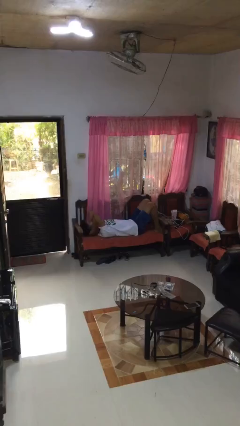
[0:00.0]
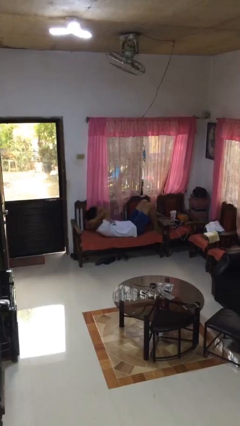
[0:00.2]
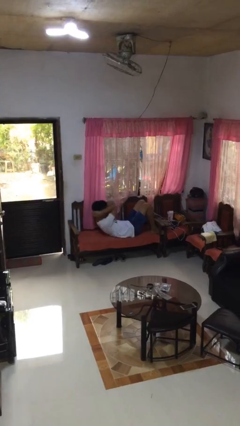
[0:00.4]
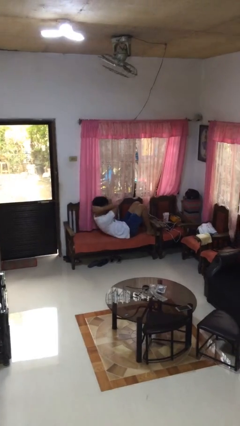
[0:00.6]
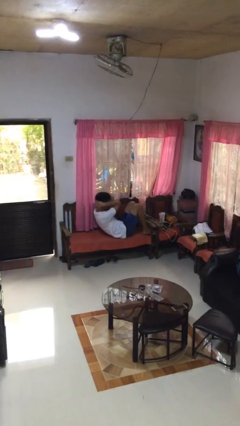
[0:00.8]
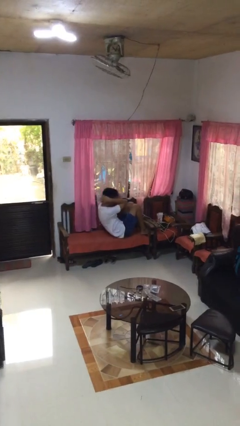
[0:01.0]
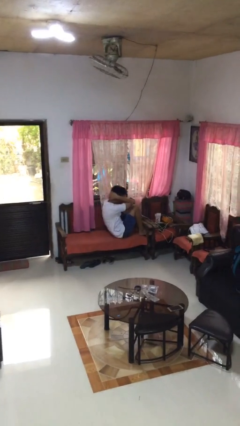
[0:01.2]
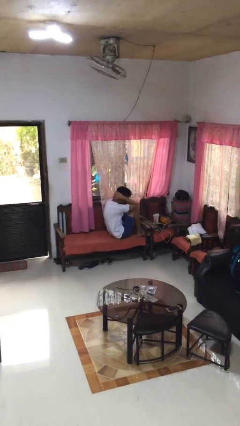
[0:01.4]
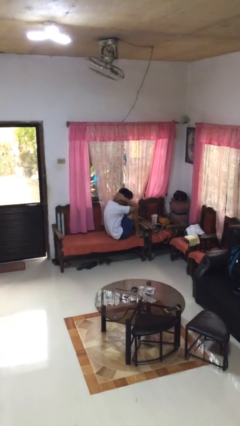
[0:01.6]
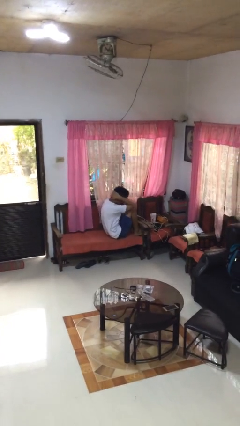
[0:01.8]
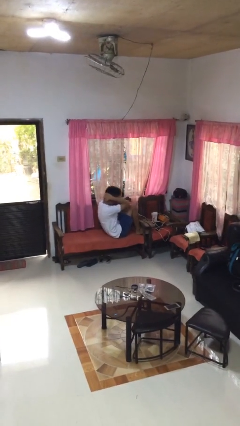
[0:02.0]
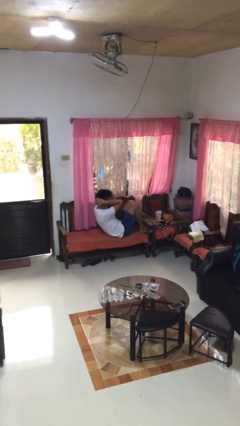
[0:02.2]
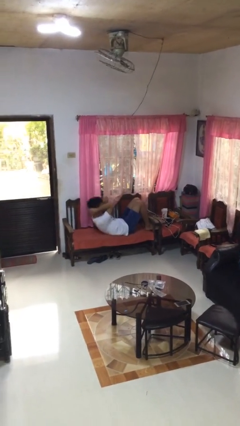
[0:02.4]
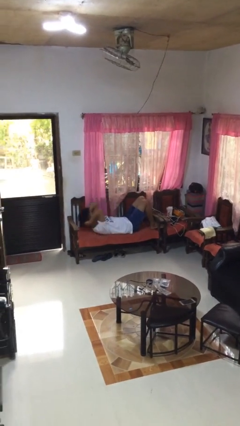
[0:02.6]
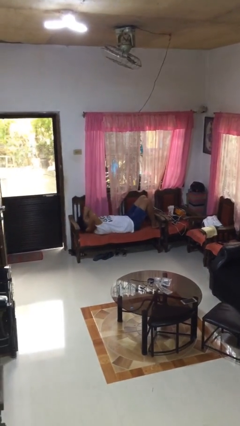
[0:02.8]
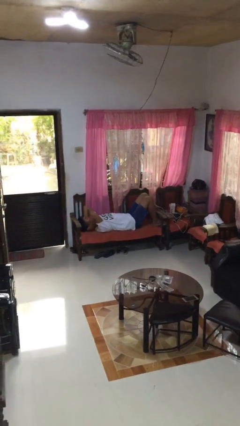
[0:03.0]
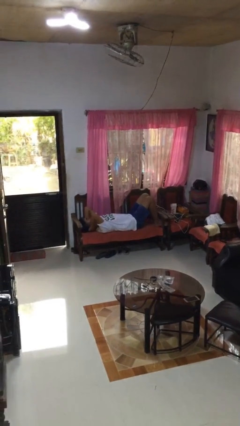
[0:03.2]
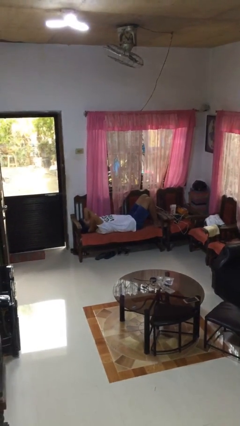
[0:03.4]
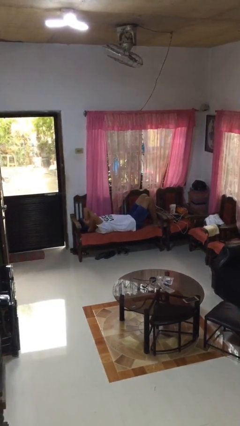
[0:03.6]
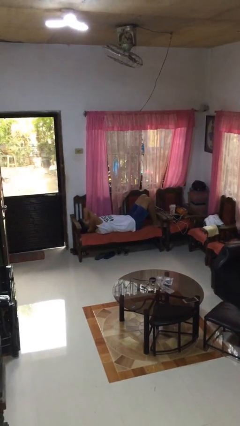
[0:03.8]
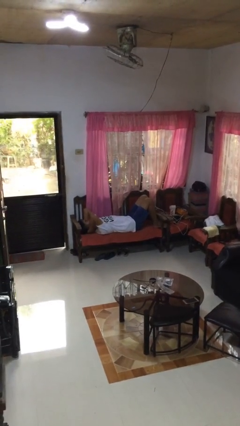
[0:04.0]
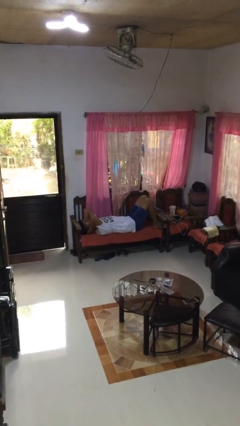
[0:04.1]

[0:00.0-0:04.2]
person exercises with situp

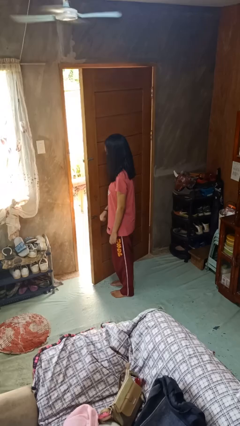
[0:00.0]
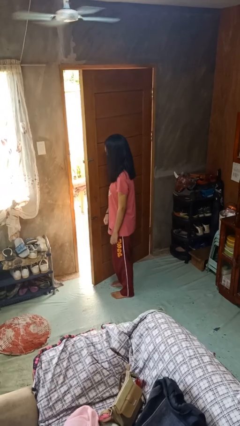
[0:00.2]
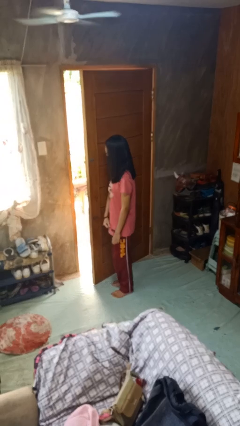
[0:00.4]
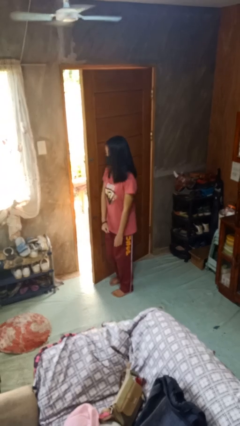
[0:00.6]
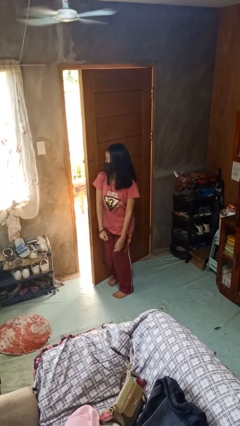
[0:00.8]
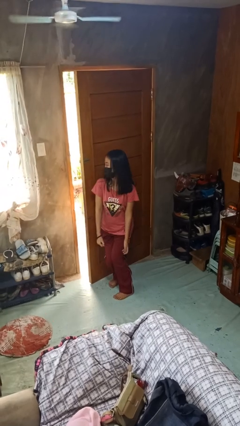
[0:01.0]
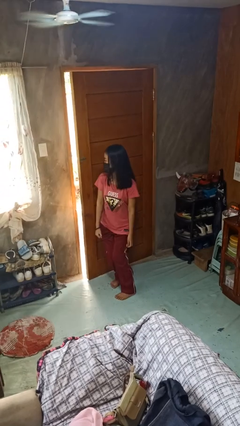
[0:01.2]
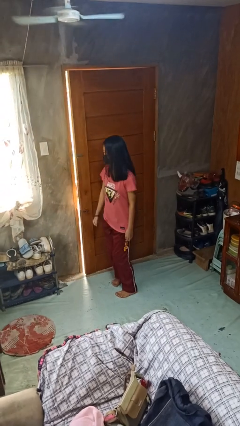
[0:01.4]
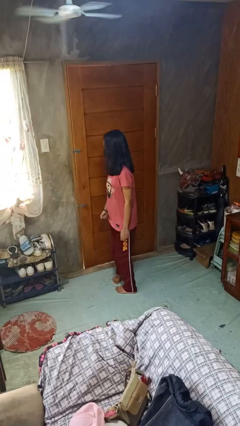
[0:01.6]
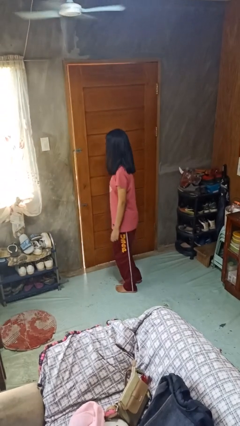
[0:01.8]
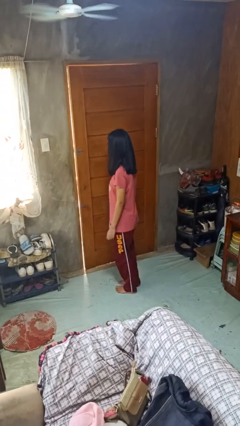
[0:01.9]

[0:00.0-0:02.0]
person closes door with hip

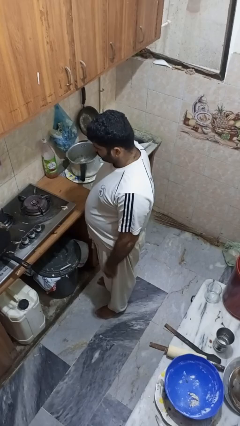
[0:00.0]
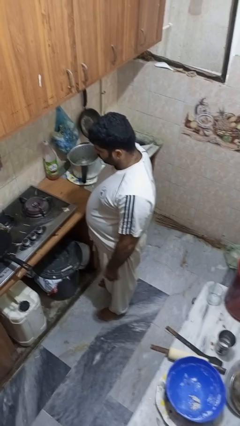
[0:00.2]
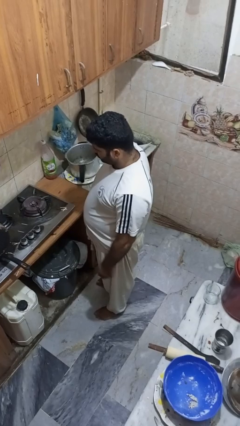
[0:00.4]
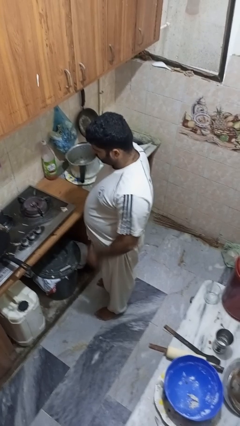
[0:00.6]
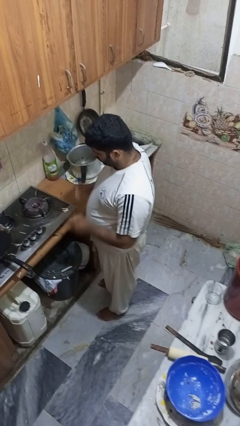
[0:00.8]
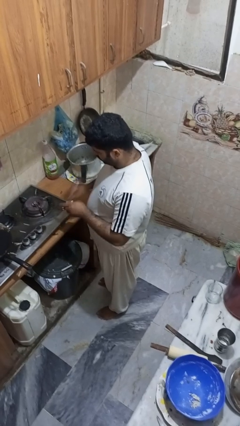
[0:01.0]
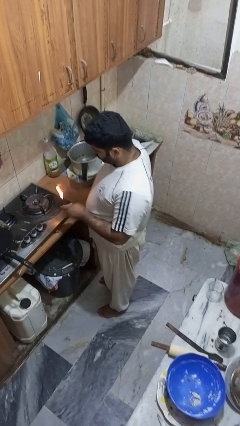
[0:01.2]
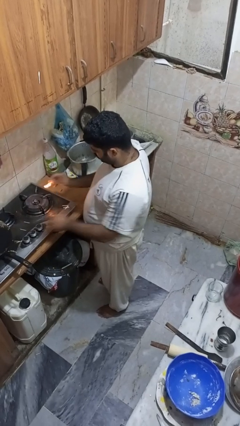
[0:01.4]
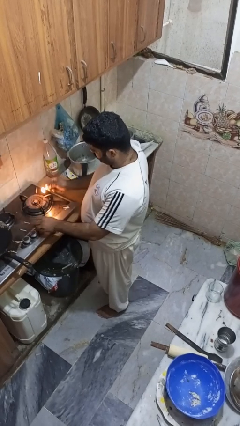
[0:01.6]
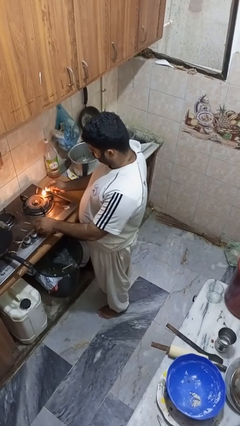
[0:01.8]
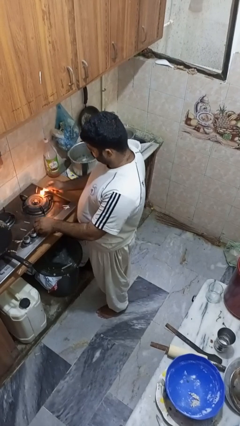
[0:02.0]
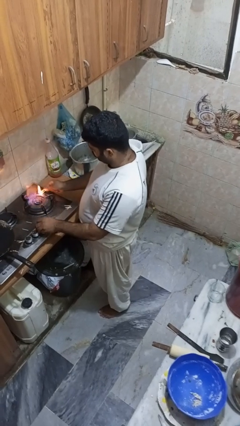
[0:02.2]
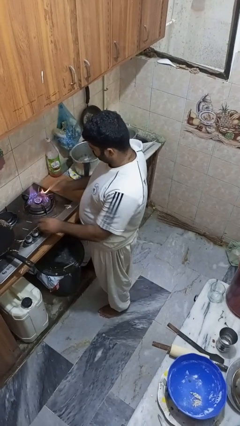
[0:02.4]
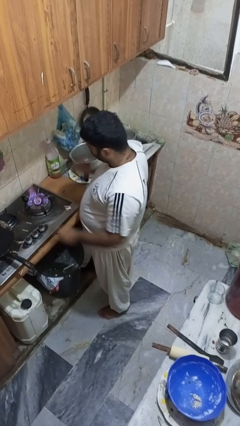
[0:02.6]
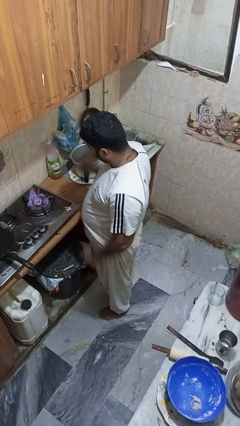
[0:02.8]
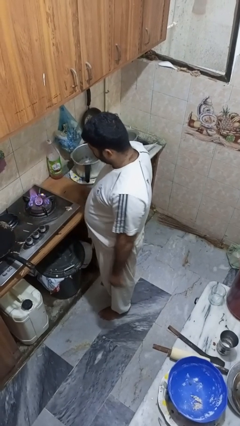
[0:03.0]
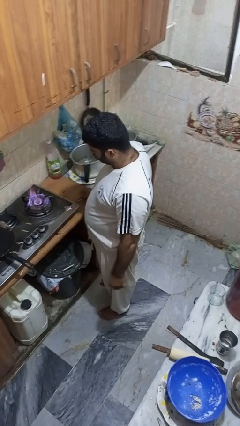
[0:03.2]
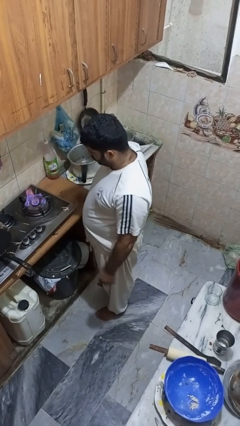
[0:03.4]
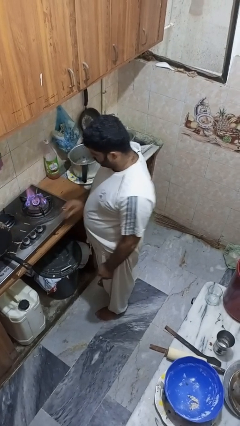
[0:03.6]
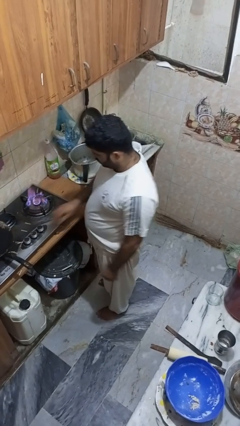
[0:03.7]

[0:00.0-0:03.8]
person turns on stovetop

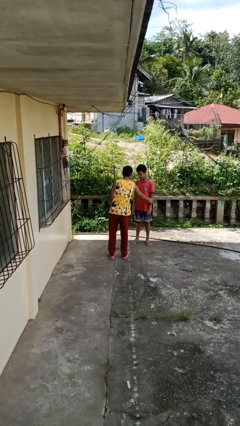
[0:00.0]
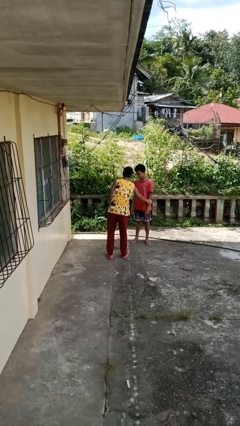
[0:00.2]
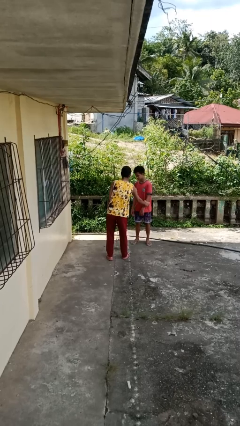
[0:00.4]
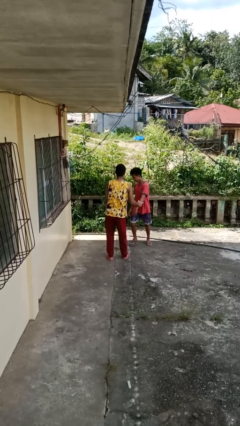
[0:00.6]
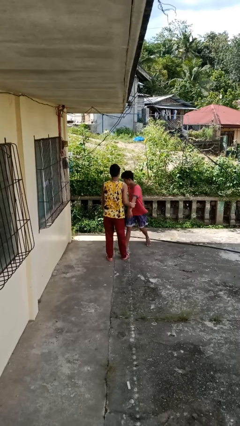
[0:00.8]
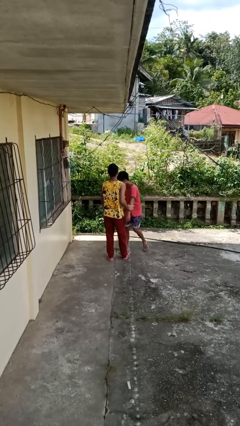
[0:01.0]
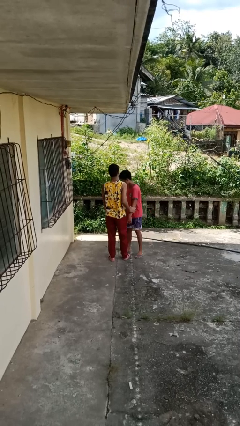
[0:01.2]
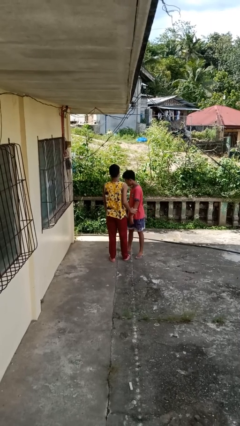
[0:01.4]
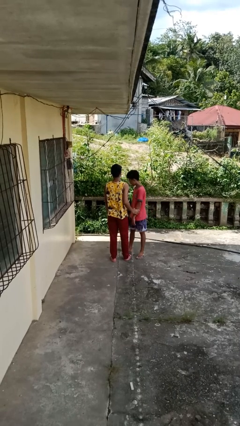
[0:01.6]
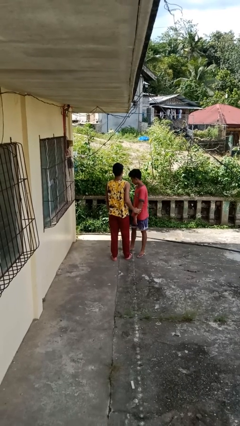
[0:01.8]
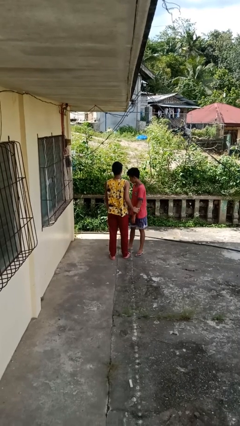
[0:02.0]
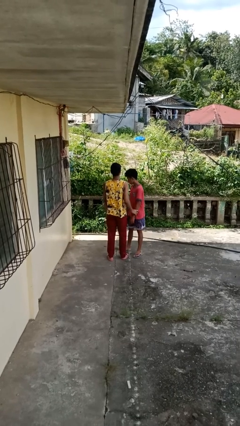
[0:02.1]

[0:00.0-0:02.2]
person grabs person by forearm

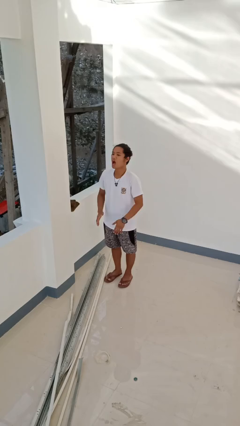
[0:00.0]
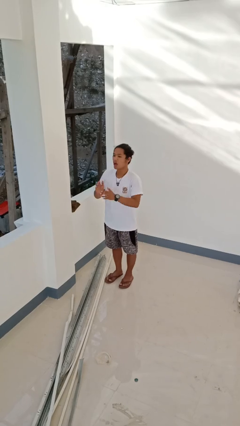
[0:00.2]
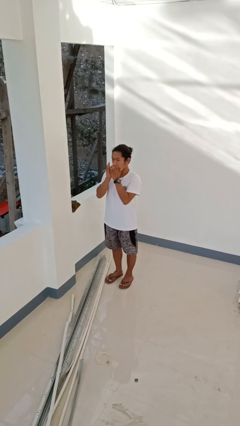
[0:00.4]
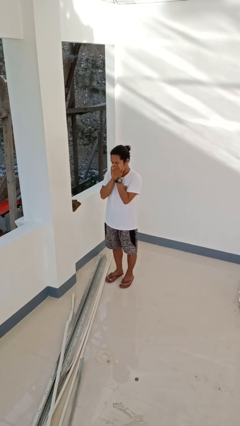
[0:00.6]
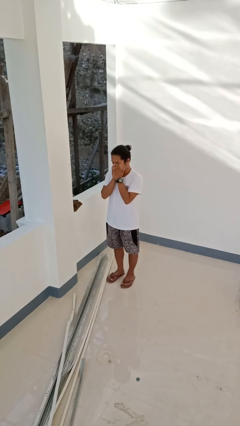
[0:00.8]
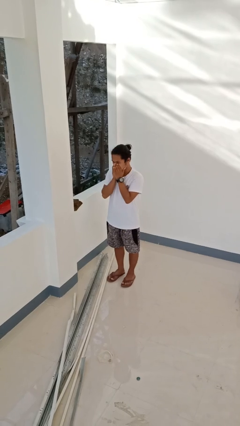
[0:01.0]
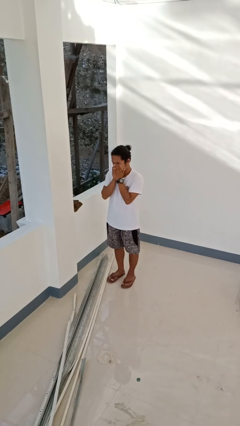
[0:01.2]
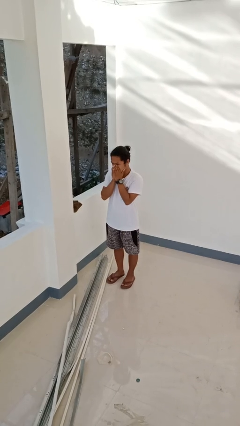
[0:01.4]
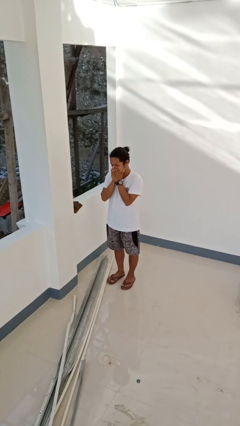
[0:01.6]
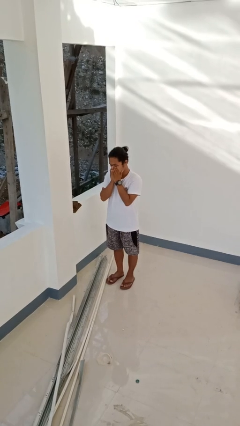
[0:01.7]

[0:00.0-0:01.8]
person sneezes into hand

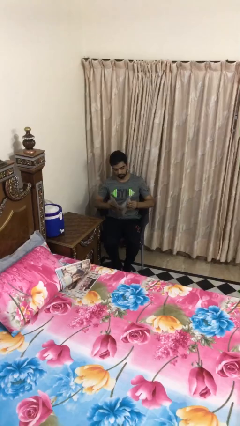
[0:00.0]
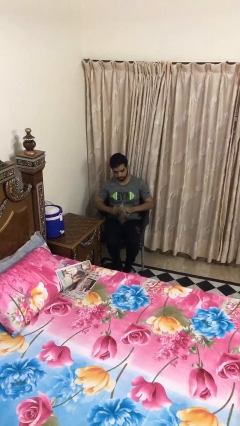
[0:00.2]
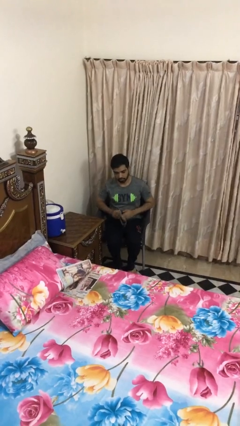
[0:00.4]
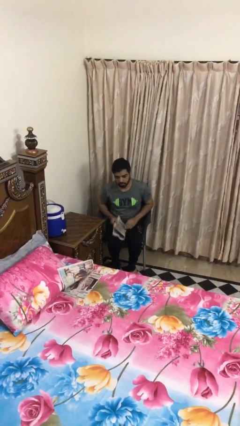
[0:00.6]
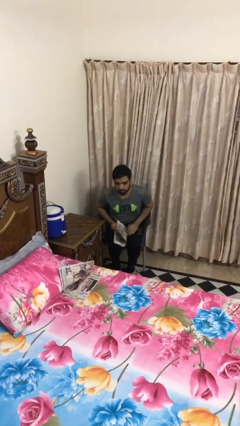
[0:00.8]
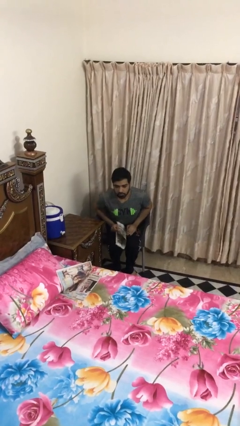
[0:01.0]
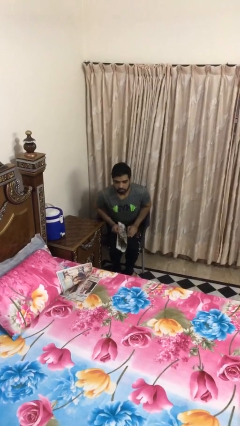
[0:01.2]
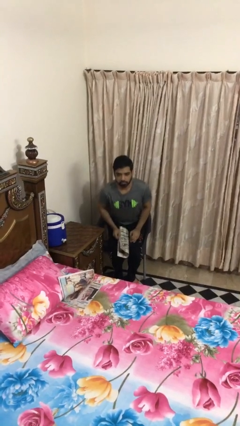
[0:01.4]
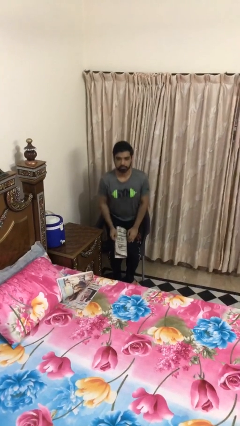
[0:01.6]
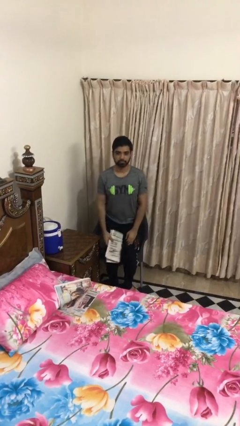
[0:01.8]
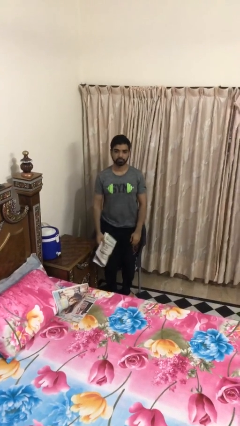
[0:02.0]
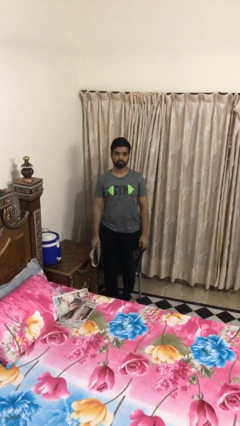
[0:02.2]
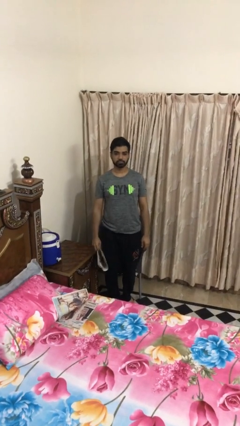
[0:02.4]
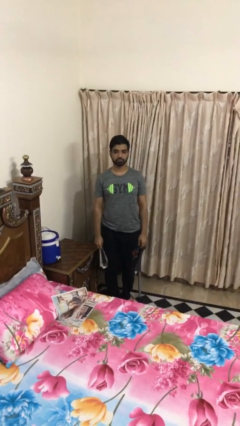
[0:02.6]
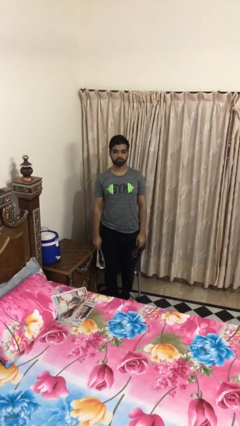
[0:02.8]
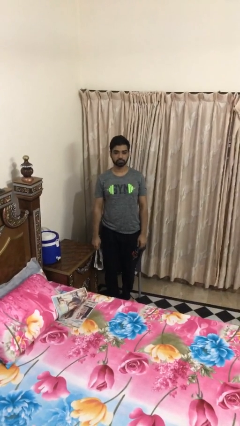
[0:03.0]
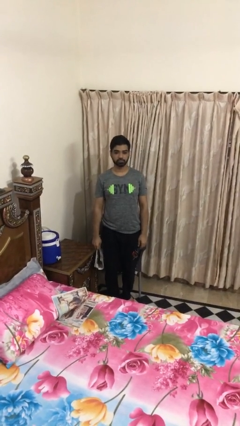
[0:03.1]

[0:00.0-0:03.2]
person stands up
